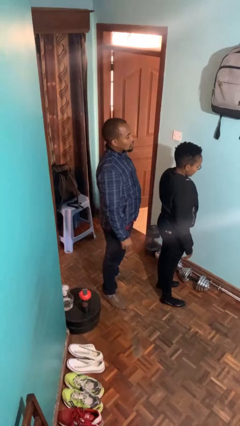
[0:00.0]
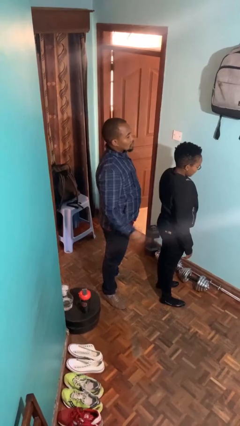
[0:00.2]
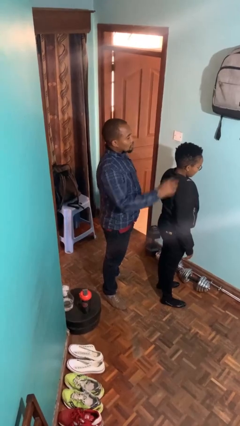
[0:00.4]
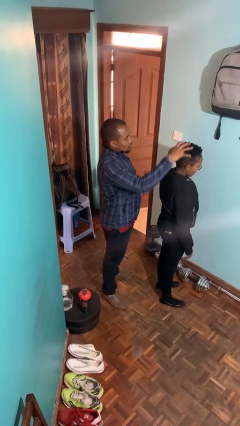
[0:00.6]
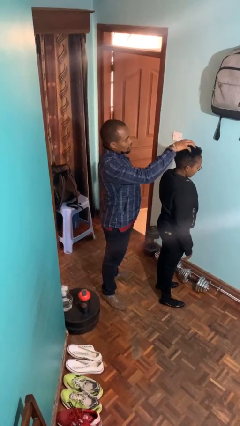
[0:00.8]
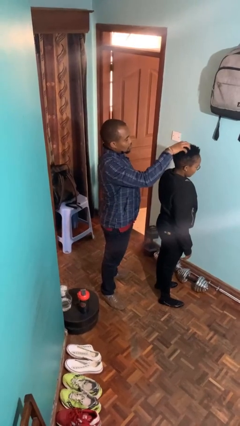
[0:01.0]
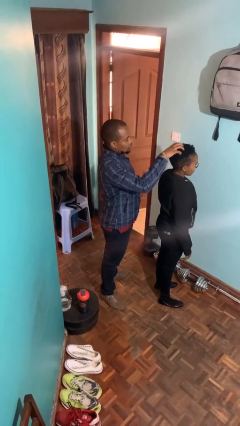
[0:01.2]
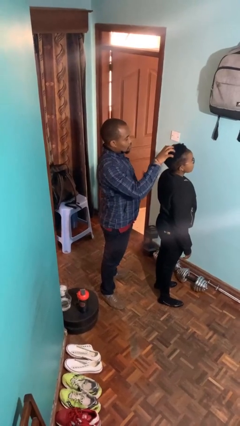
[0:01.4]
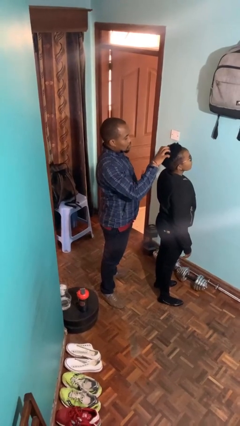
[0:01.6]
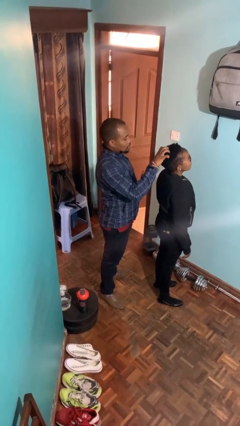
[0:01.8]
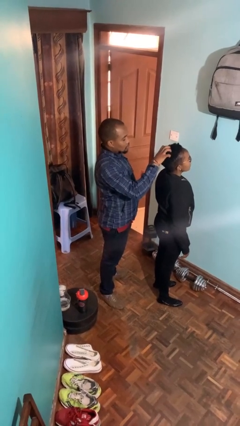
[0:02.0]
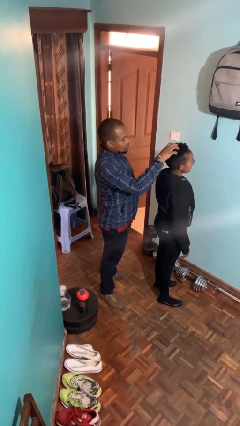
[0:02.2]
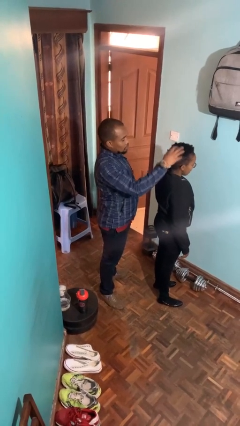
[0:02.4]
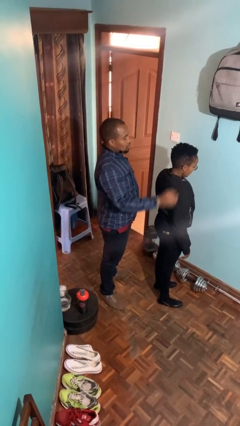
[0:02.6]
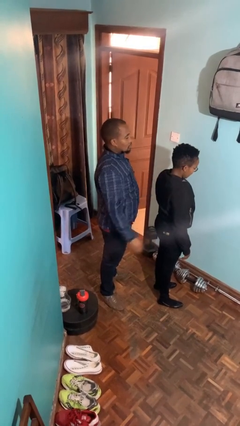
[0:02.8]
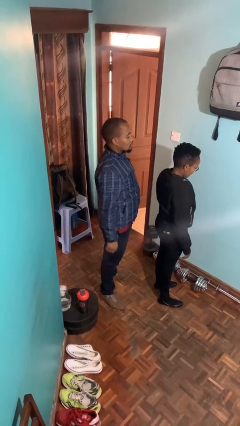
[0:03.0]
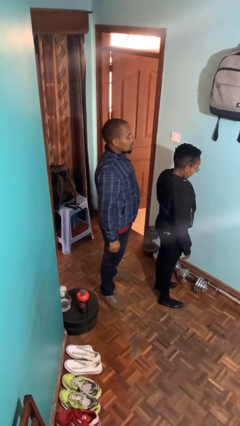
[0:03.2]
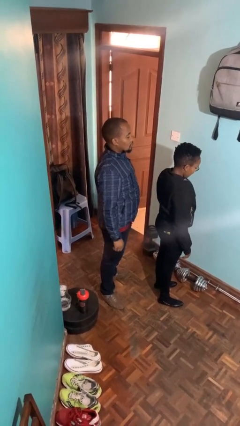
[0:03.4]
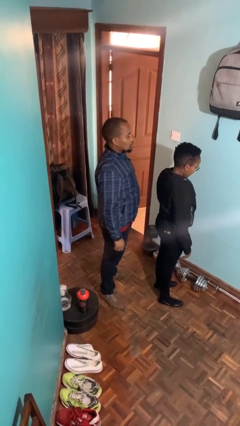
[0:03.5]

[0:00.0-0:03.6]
person grabs person by hair

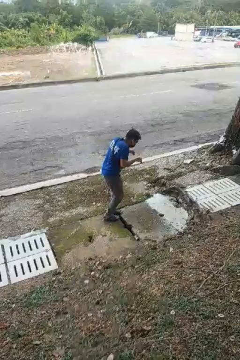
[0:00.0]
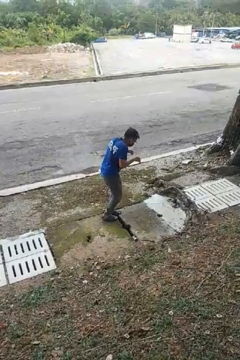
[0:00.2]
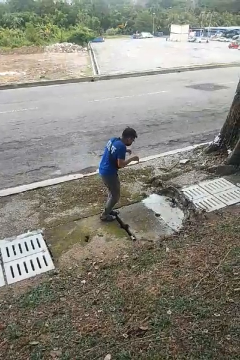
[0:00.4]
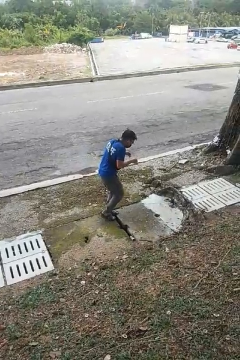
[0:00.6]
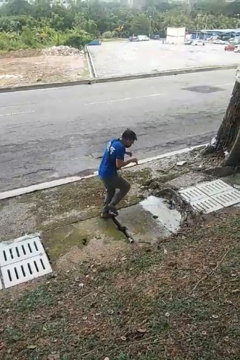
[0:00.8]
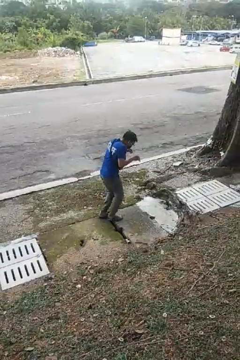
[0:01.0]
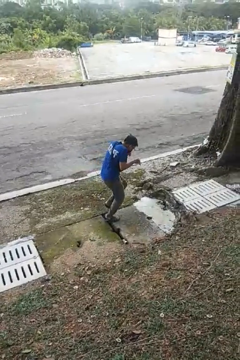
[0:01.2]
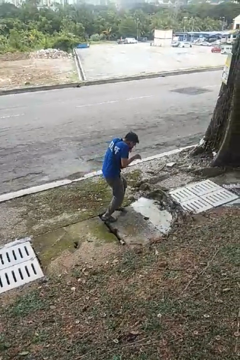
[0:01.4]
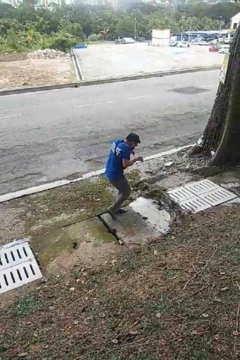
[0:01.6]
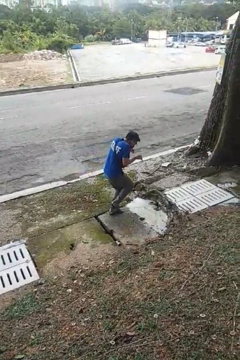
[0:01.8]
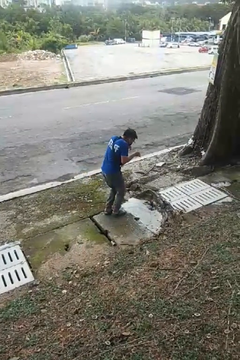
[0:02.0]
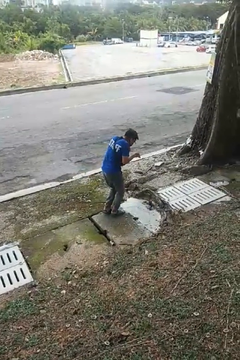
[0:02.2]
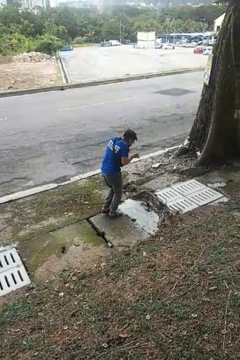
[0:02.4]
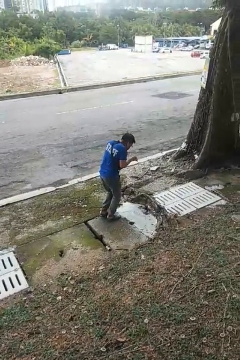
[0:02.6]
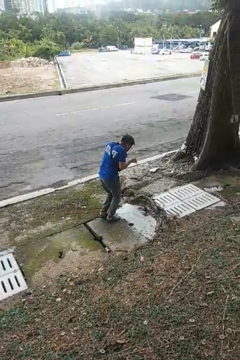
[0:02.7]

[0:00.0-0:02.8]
person walks tiptoe

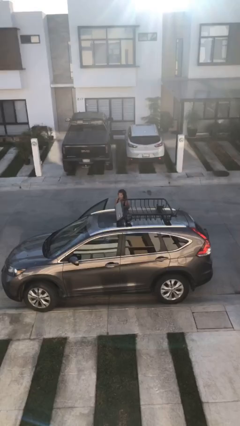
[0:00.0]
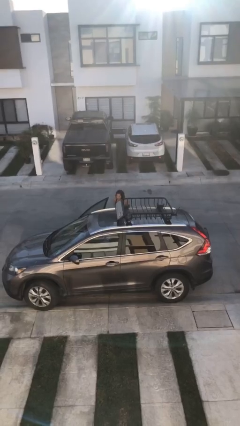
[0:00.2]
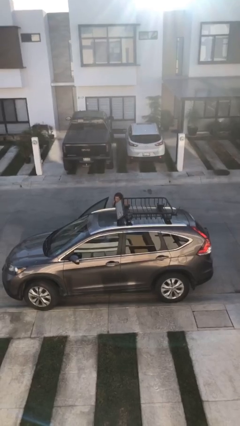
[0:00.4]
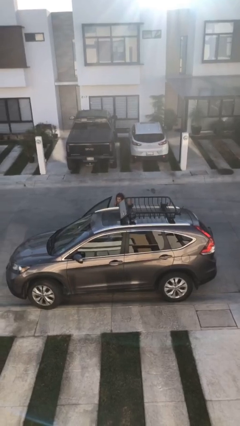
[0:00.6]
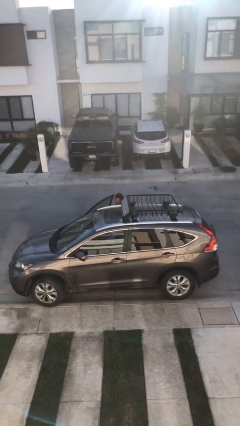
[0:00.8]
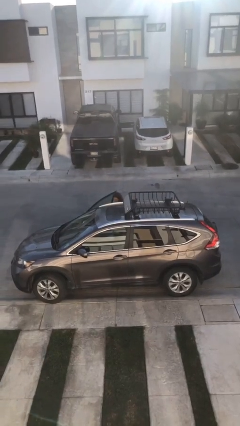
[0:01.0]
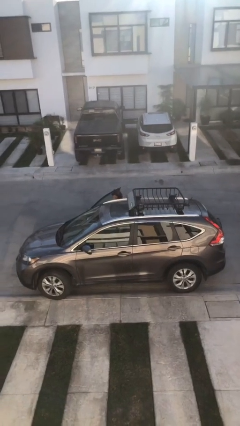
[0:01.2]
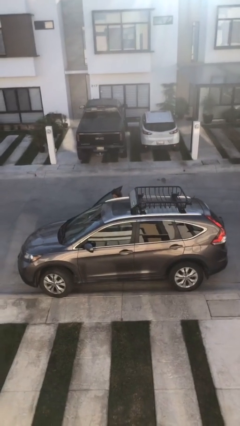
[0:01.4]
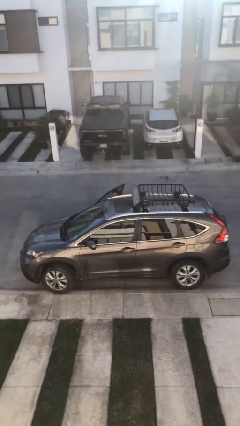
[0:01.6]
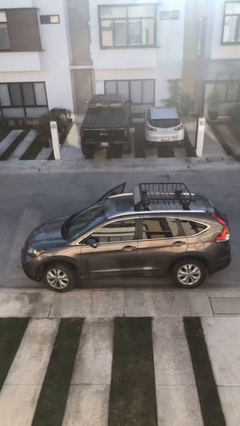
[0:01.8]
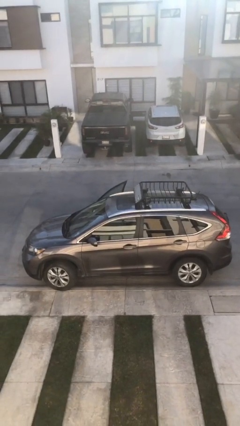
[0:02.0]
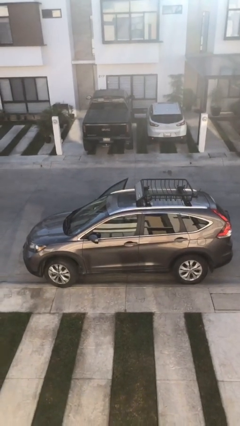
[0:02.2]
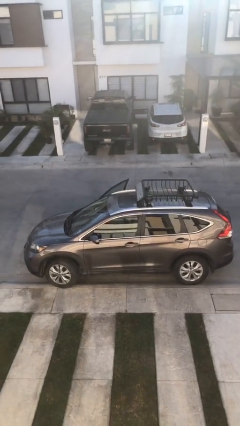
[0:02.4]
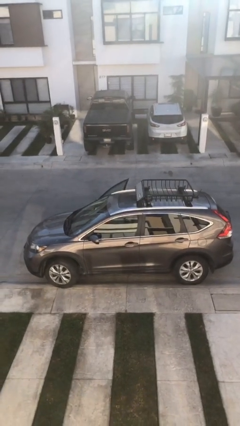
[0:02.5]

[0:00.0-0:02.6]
person enters car

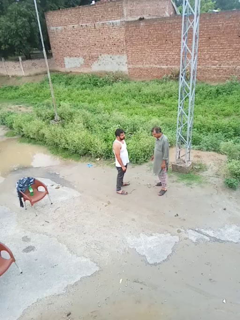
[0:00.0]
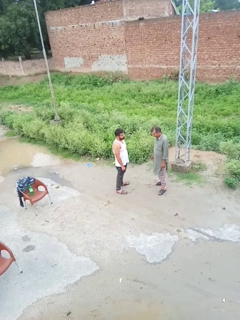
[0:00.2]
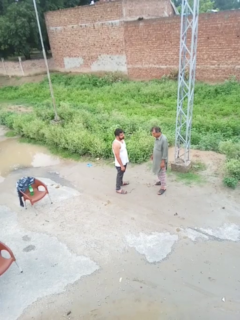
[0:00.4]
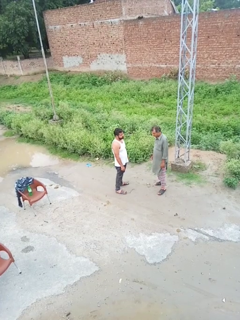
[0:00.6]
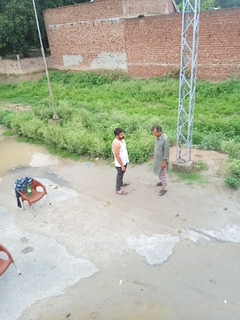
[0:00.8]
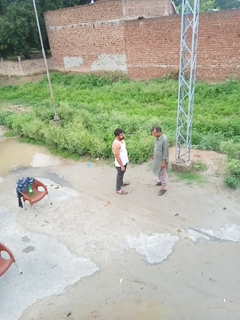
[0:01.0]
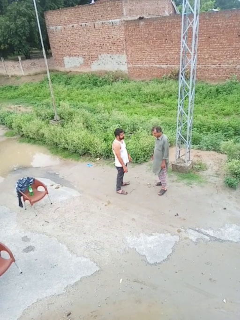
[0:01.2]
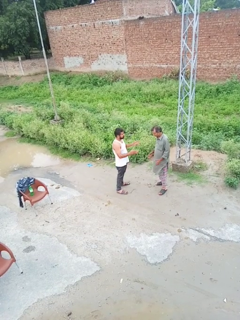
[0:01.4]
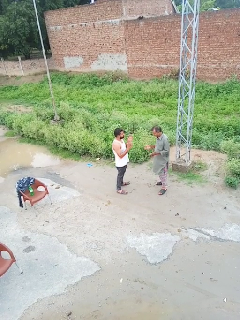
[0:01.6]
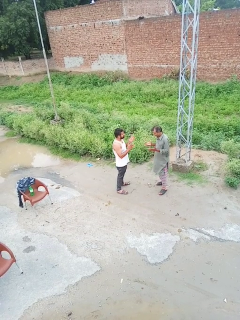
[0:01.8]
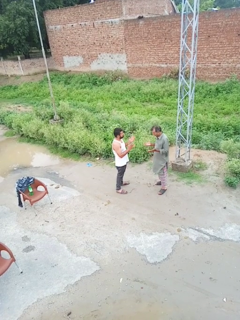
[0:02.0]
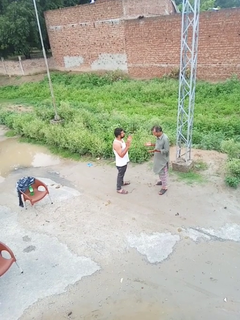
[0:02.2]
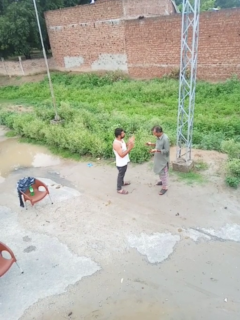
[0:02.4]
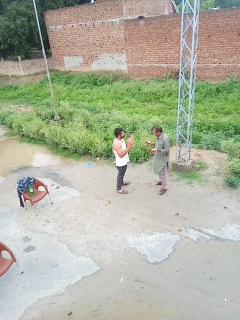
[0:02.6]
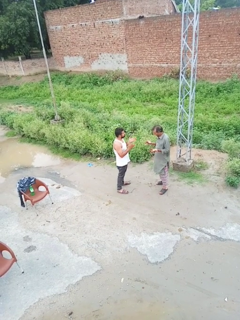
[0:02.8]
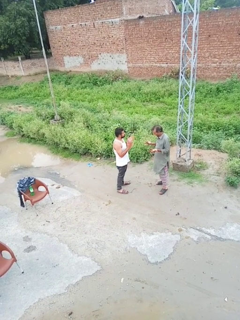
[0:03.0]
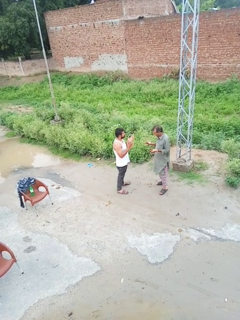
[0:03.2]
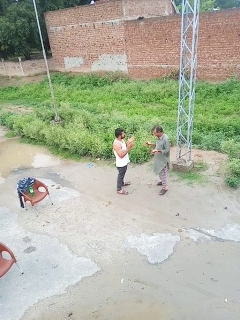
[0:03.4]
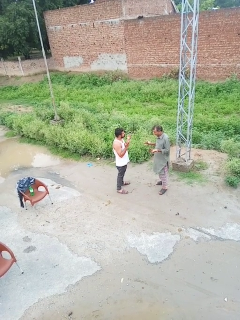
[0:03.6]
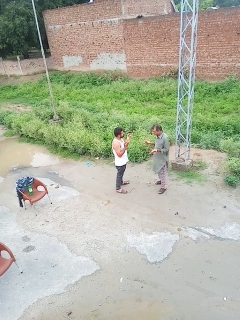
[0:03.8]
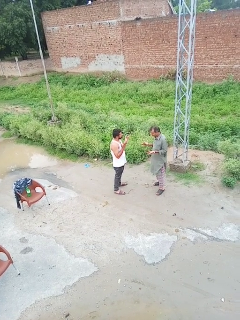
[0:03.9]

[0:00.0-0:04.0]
person talks to person

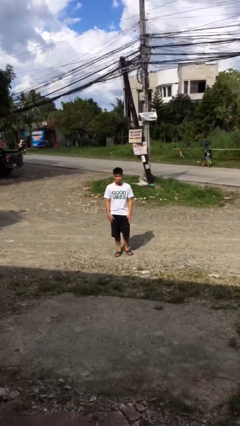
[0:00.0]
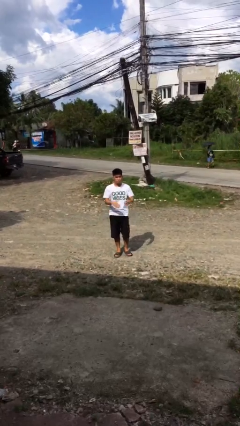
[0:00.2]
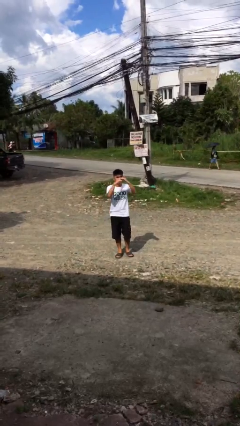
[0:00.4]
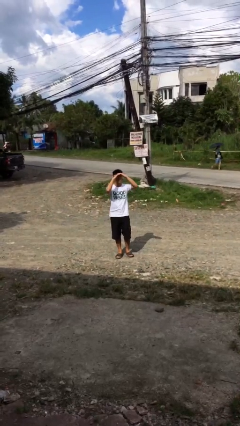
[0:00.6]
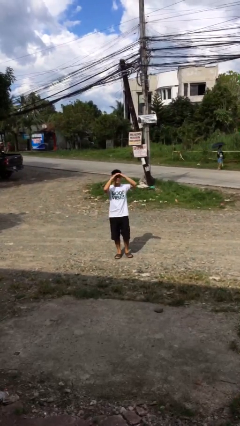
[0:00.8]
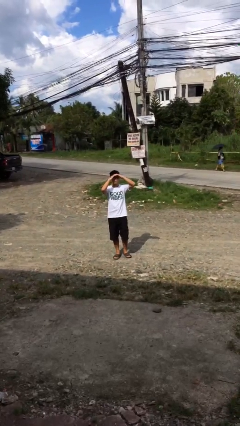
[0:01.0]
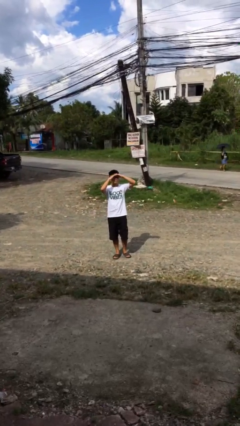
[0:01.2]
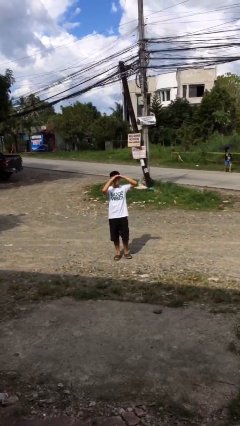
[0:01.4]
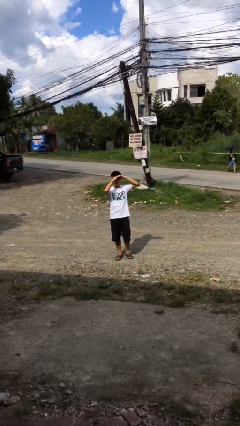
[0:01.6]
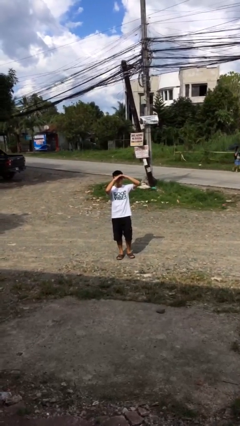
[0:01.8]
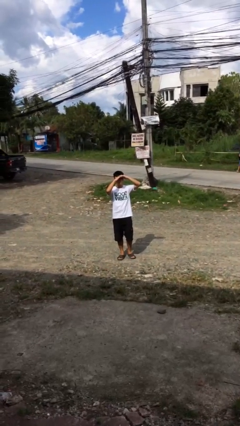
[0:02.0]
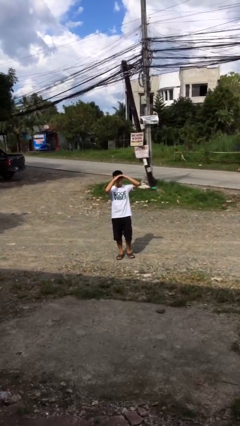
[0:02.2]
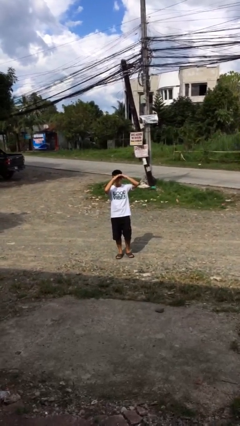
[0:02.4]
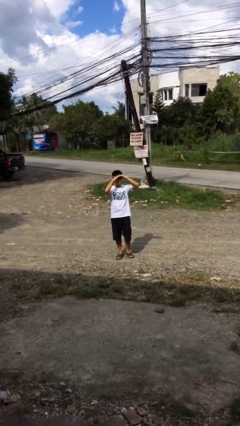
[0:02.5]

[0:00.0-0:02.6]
person shades eyes

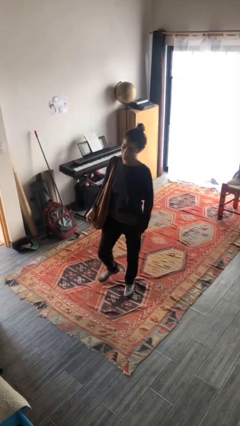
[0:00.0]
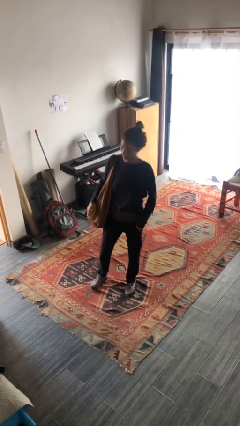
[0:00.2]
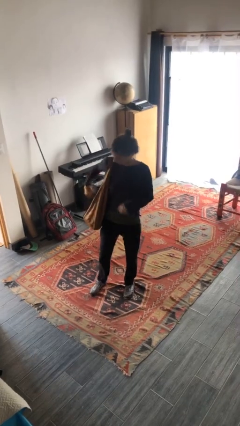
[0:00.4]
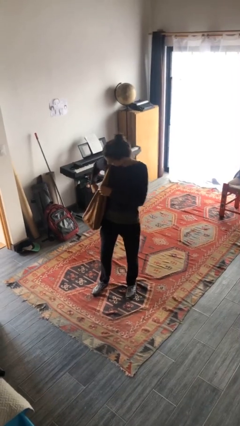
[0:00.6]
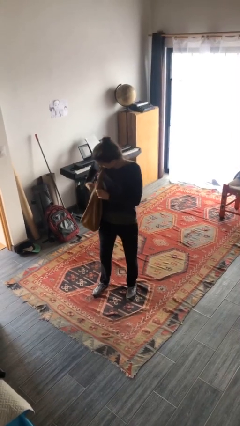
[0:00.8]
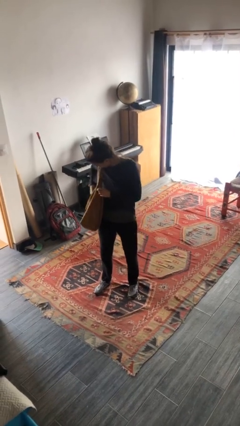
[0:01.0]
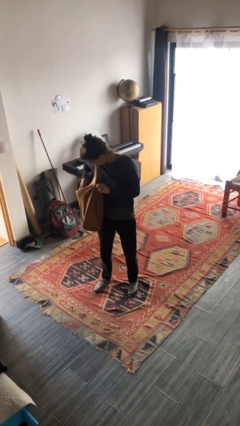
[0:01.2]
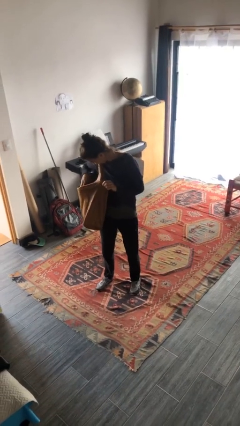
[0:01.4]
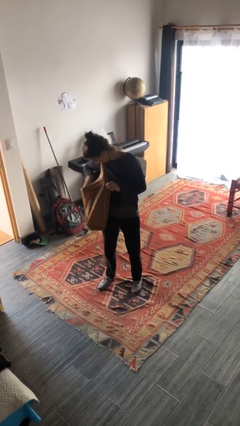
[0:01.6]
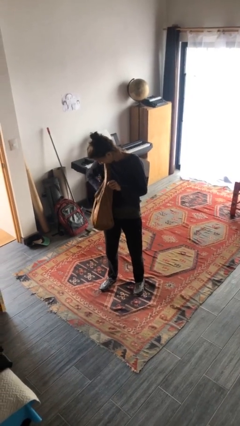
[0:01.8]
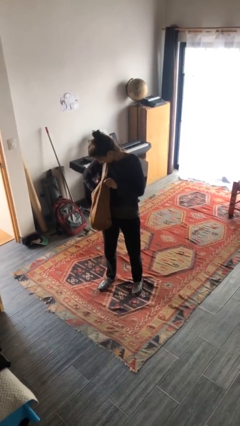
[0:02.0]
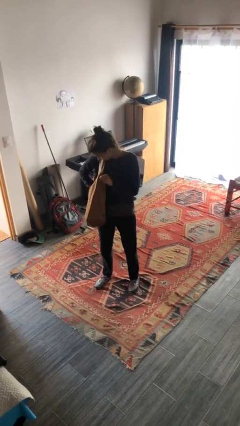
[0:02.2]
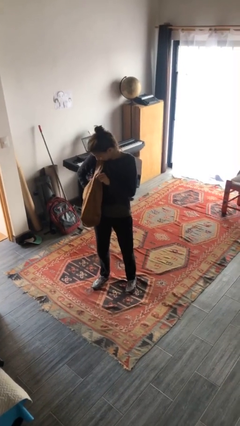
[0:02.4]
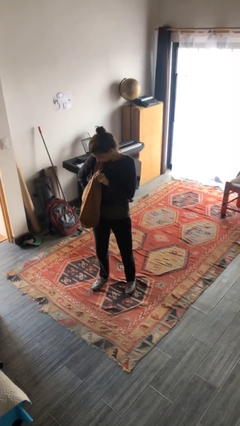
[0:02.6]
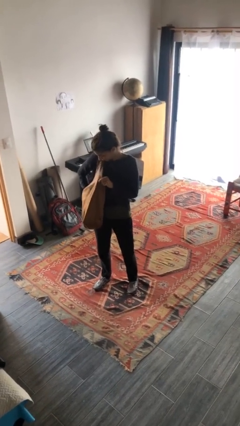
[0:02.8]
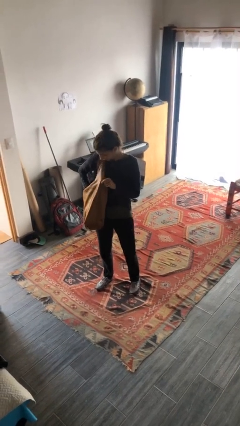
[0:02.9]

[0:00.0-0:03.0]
person searches in purse

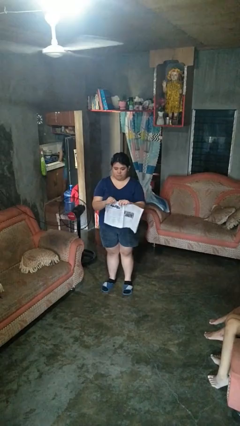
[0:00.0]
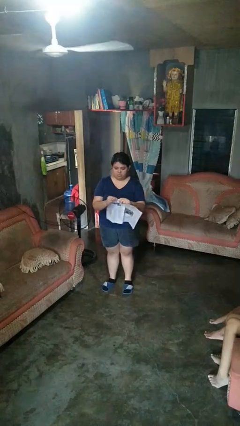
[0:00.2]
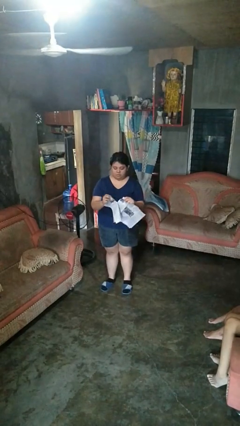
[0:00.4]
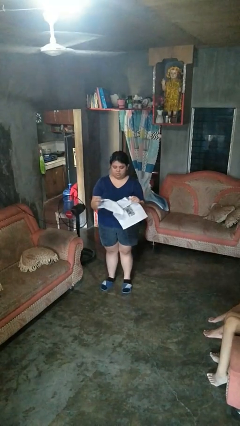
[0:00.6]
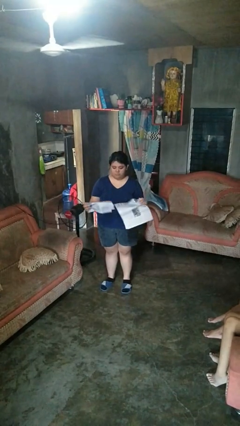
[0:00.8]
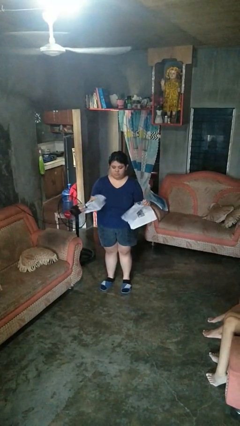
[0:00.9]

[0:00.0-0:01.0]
person tears paper
